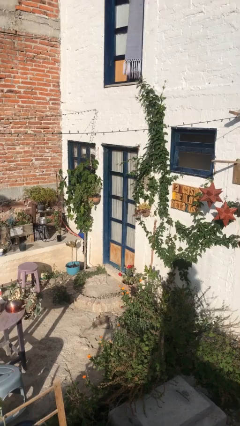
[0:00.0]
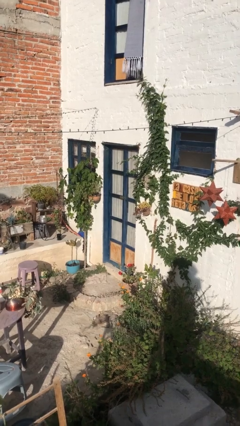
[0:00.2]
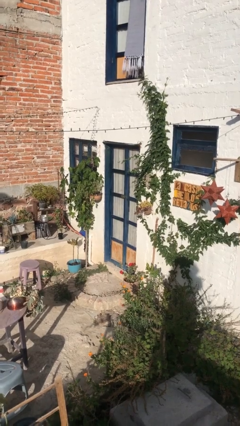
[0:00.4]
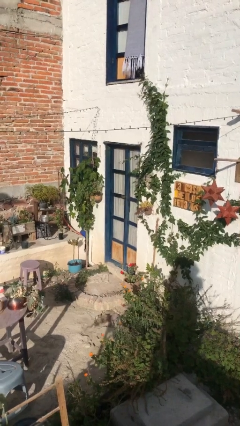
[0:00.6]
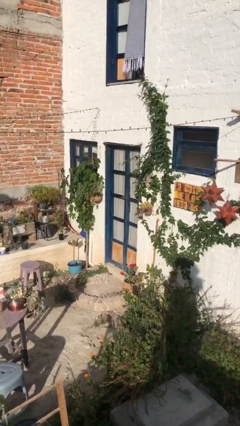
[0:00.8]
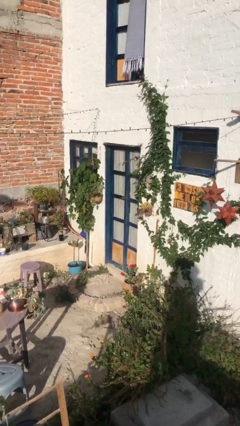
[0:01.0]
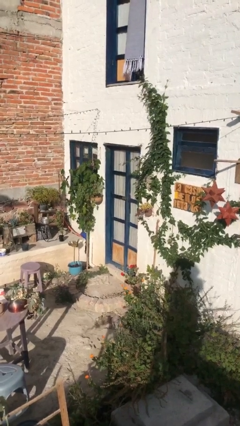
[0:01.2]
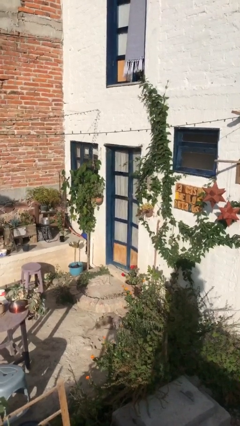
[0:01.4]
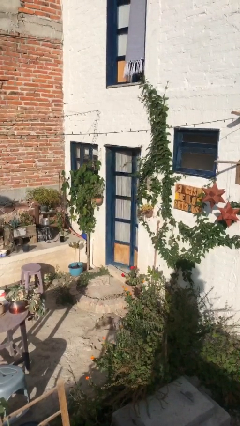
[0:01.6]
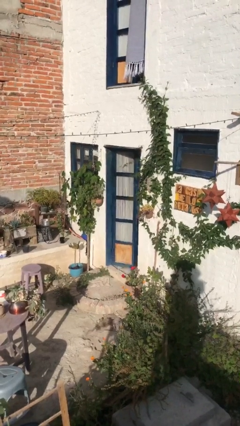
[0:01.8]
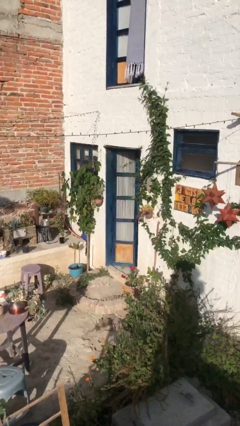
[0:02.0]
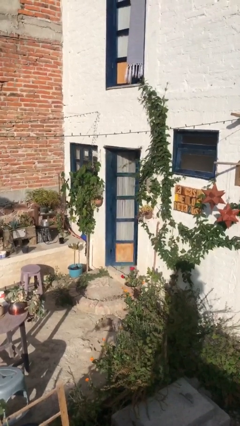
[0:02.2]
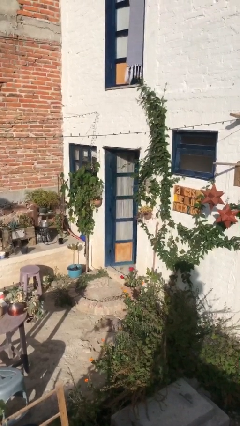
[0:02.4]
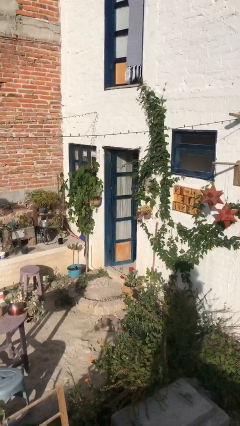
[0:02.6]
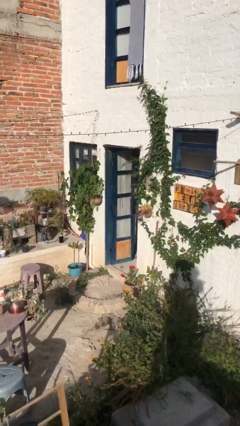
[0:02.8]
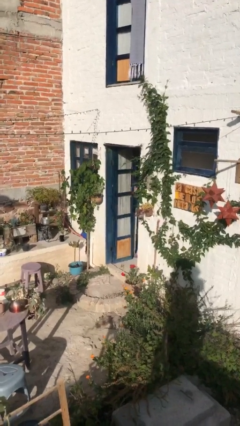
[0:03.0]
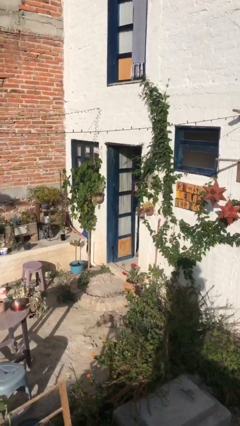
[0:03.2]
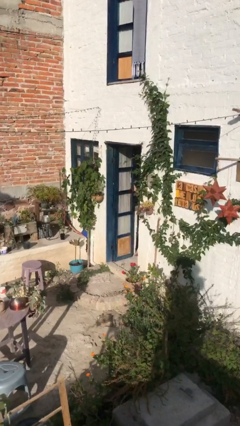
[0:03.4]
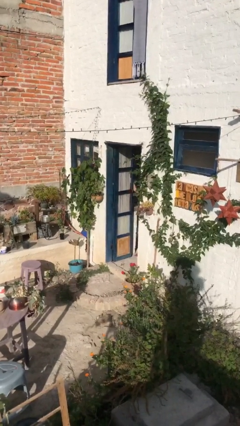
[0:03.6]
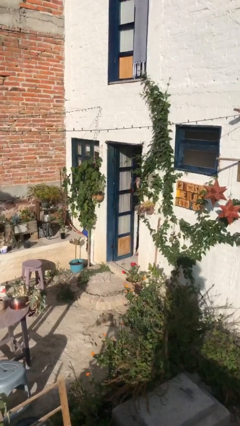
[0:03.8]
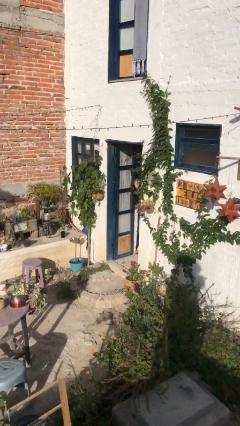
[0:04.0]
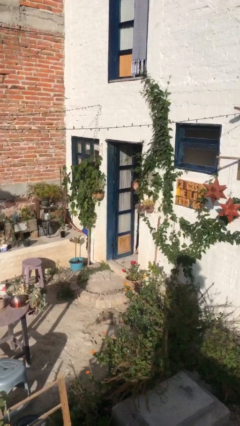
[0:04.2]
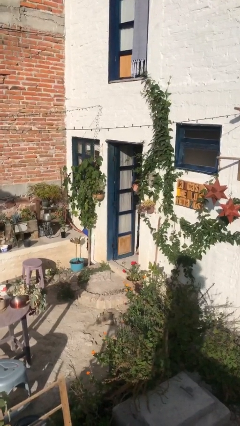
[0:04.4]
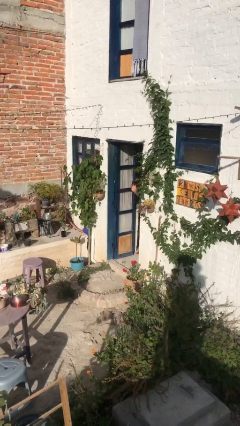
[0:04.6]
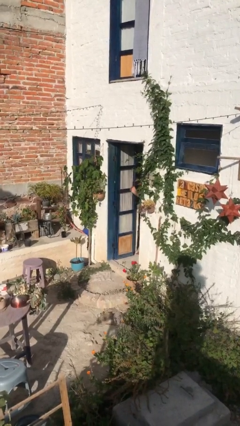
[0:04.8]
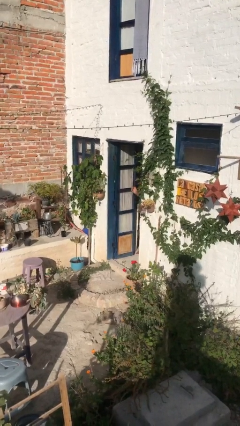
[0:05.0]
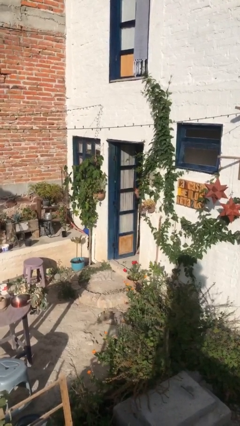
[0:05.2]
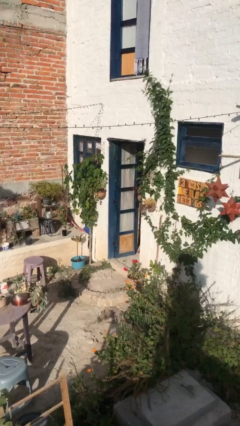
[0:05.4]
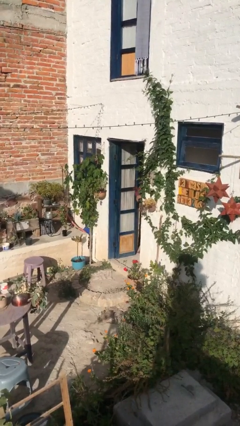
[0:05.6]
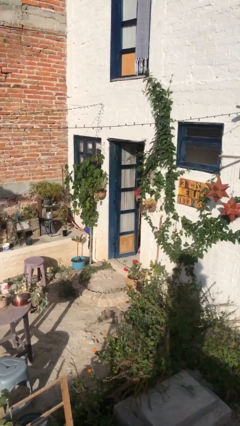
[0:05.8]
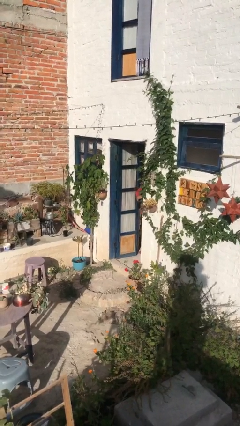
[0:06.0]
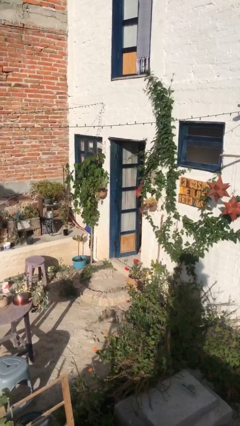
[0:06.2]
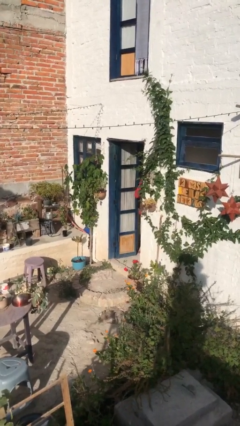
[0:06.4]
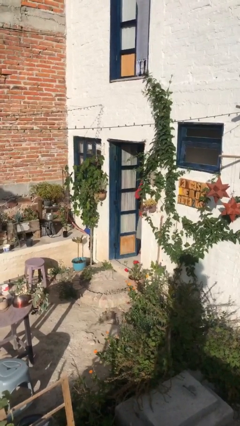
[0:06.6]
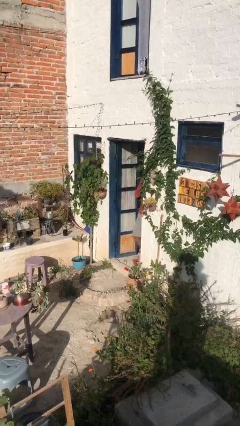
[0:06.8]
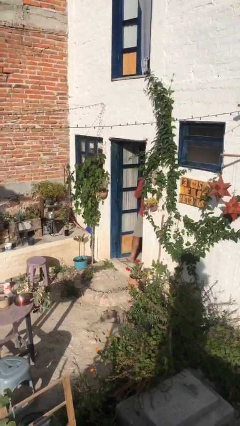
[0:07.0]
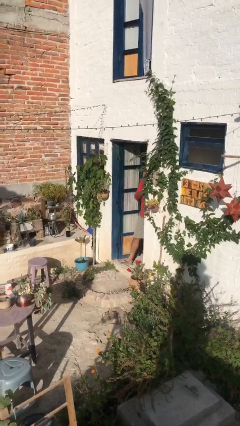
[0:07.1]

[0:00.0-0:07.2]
person opens facility door

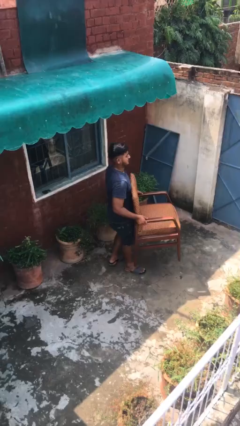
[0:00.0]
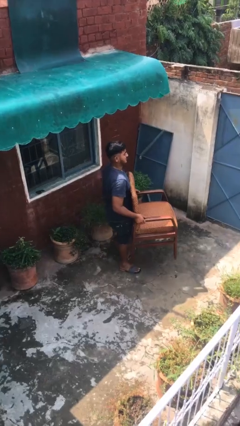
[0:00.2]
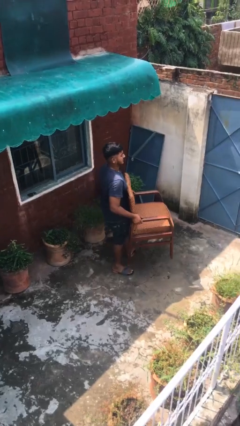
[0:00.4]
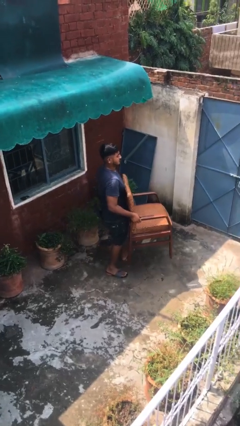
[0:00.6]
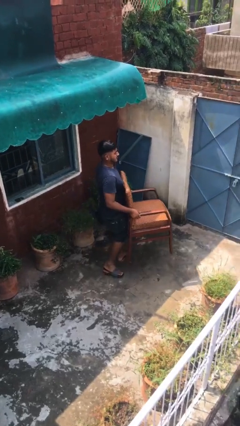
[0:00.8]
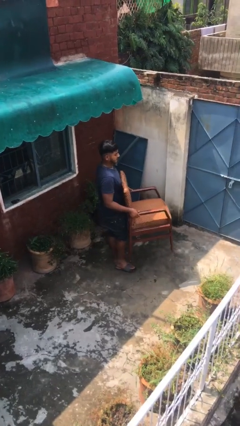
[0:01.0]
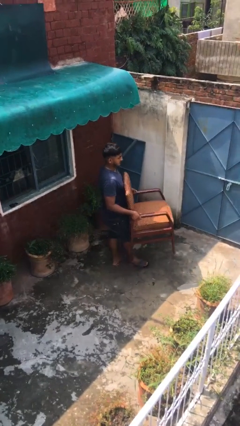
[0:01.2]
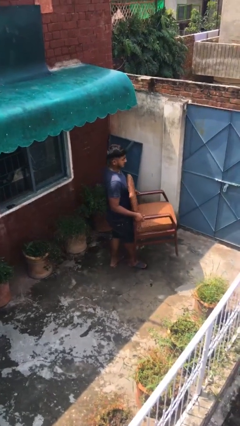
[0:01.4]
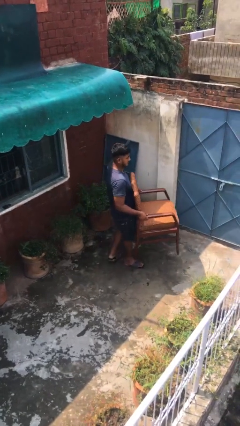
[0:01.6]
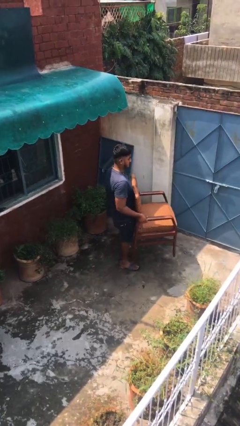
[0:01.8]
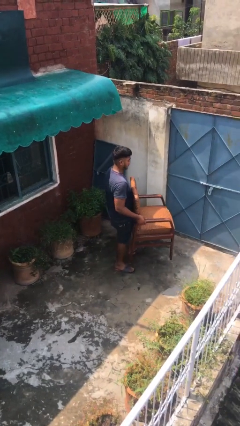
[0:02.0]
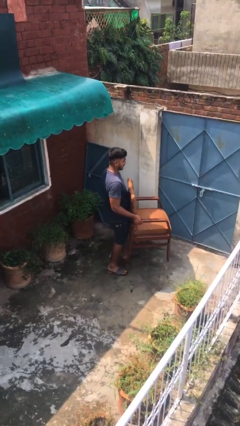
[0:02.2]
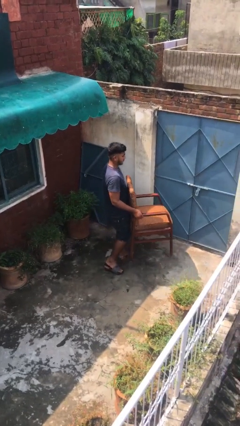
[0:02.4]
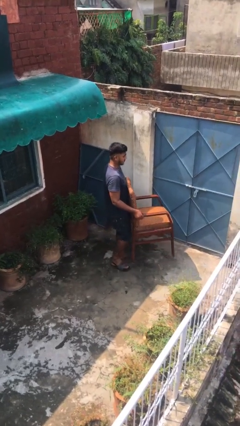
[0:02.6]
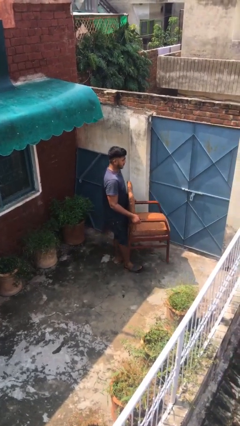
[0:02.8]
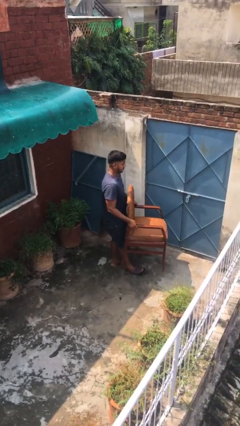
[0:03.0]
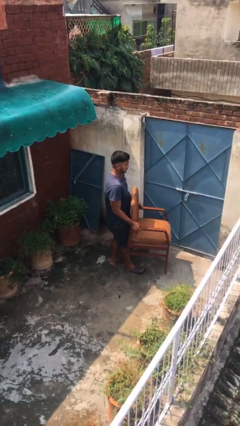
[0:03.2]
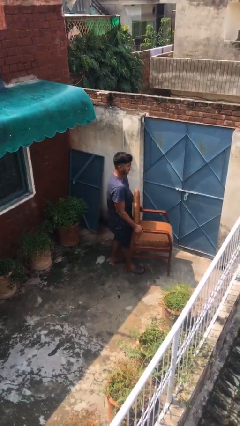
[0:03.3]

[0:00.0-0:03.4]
person carries heavy object

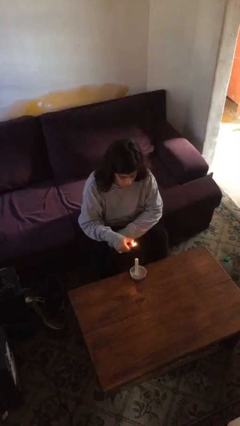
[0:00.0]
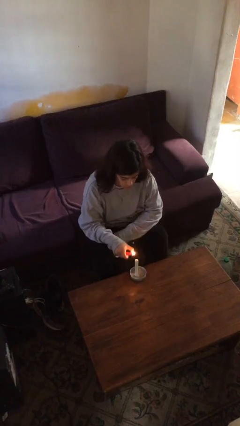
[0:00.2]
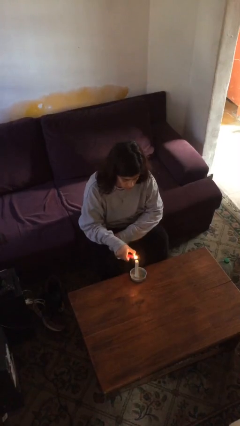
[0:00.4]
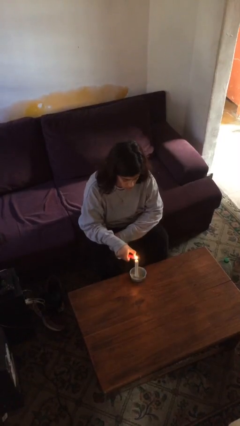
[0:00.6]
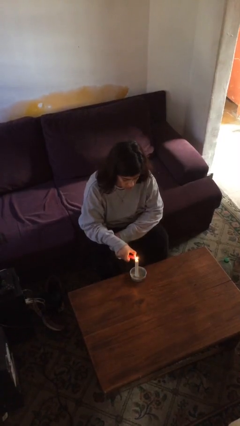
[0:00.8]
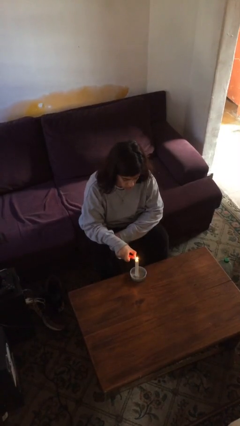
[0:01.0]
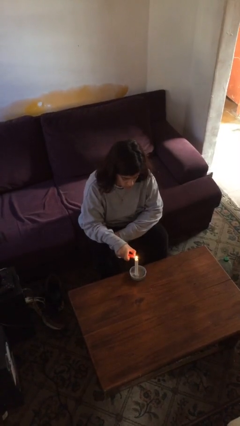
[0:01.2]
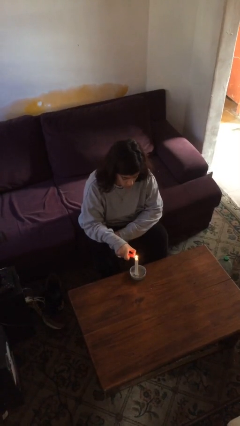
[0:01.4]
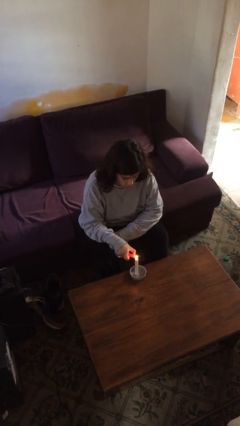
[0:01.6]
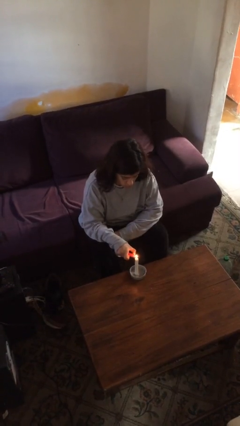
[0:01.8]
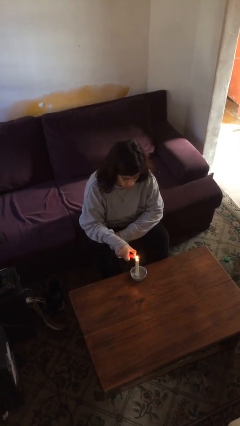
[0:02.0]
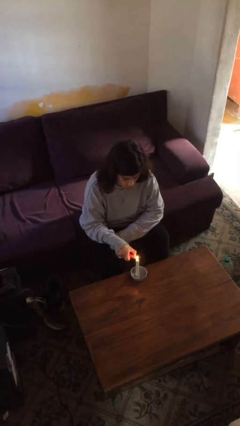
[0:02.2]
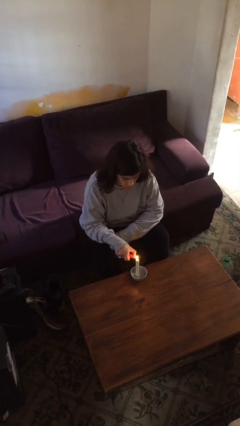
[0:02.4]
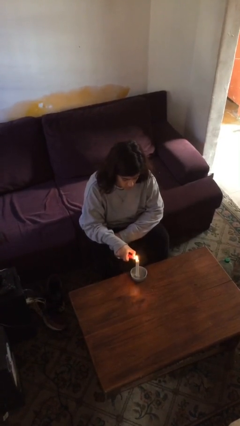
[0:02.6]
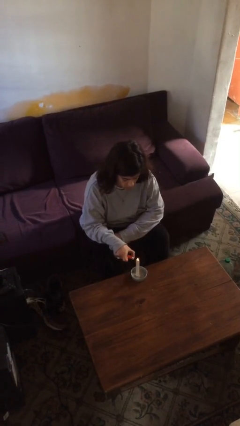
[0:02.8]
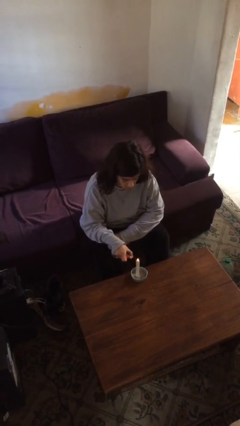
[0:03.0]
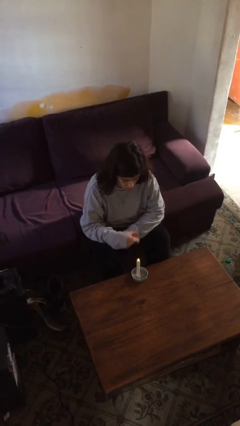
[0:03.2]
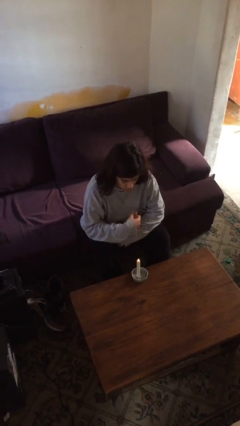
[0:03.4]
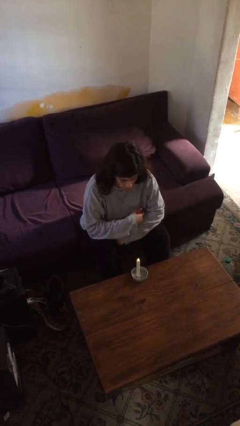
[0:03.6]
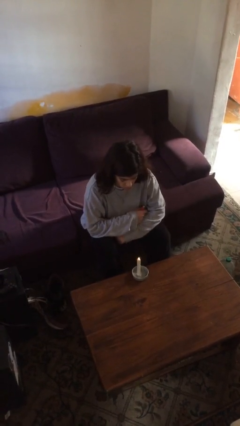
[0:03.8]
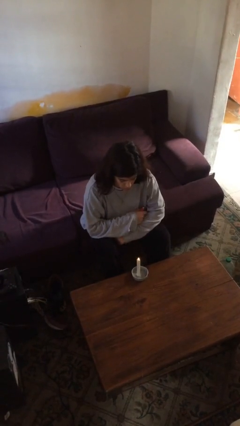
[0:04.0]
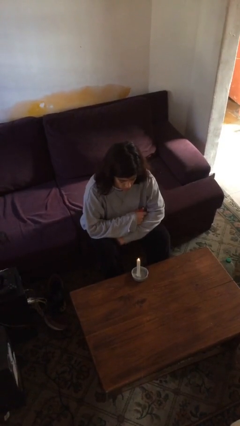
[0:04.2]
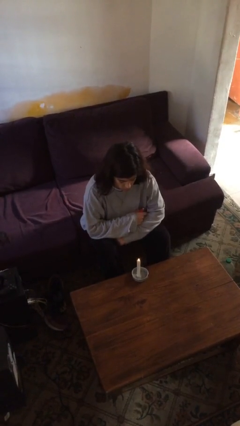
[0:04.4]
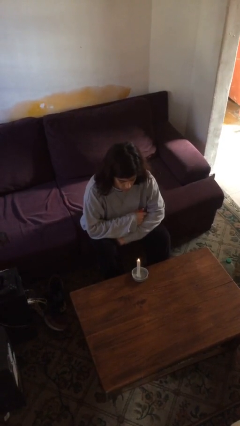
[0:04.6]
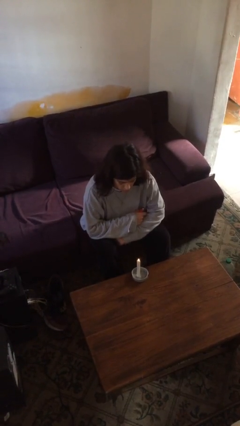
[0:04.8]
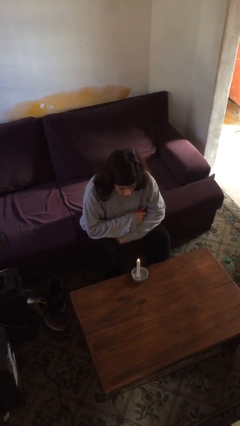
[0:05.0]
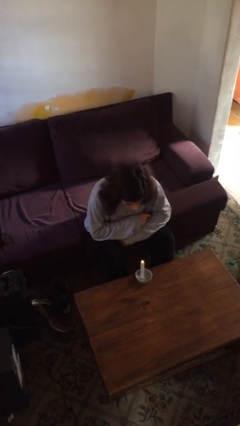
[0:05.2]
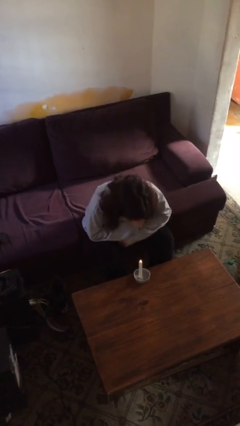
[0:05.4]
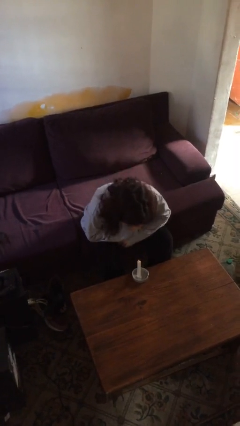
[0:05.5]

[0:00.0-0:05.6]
person lights candle

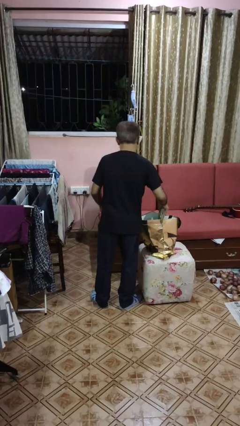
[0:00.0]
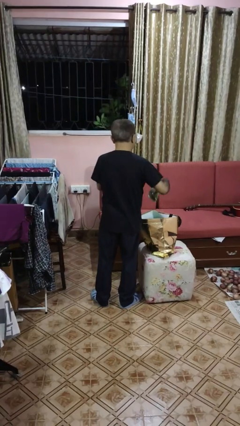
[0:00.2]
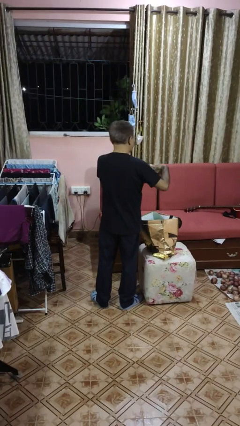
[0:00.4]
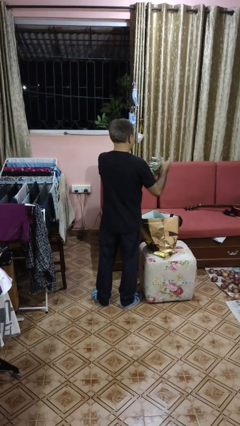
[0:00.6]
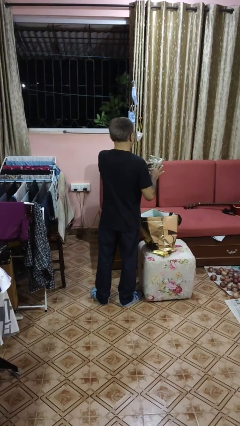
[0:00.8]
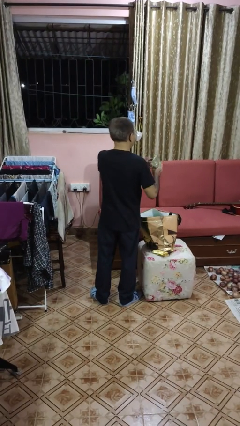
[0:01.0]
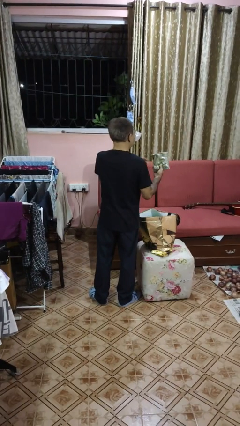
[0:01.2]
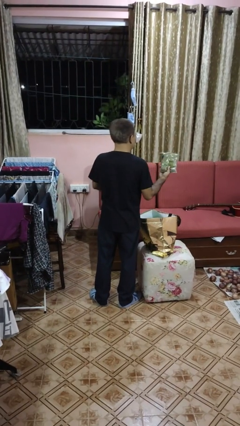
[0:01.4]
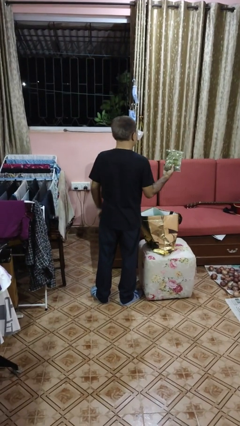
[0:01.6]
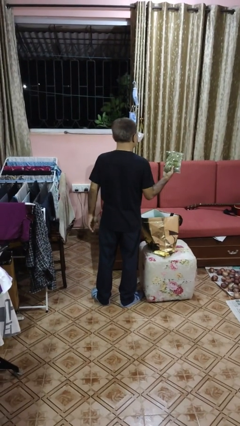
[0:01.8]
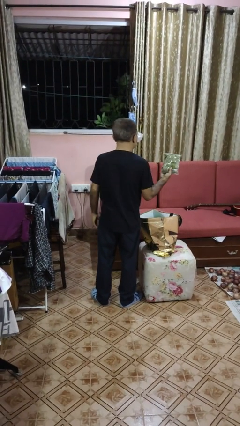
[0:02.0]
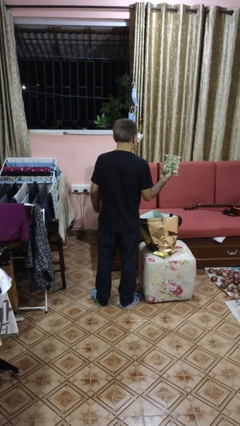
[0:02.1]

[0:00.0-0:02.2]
person takes object from bag
